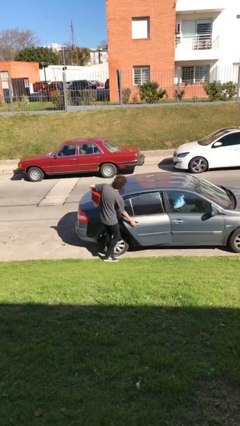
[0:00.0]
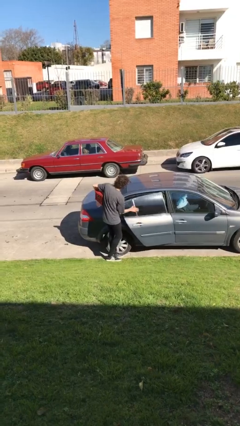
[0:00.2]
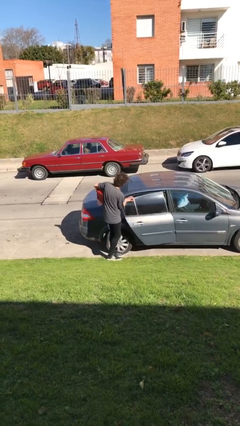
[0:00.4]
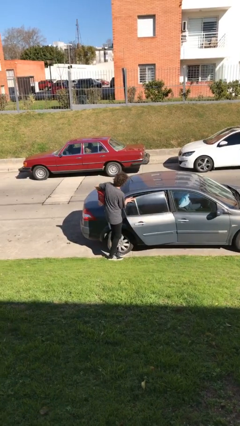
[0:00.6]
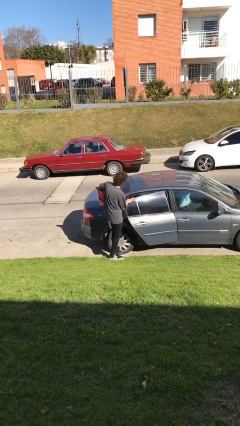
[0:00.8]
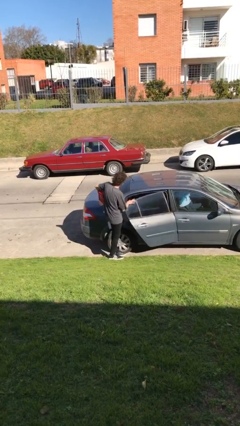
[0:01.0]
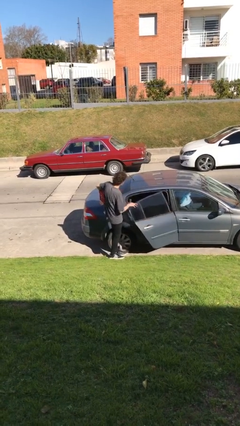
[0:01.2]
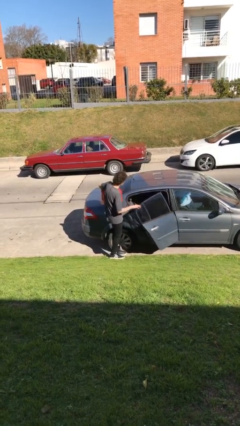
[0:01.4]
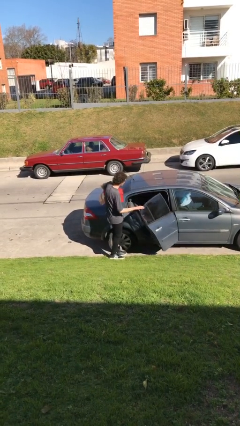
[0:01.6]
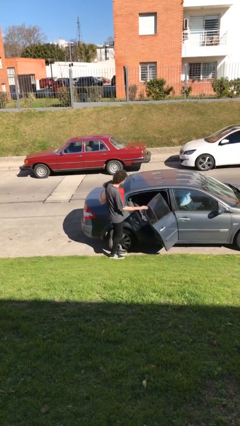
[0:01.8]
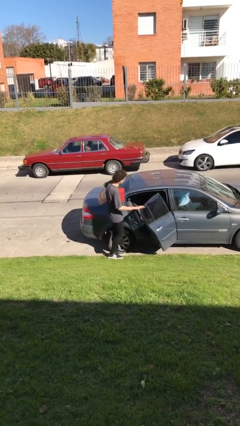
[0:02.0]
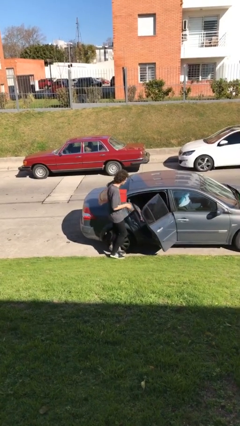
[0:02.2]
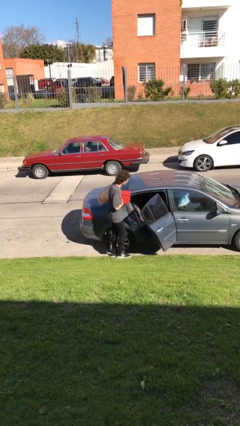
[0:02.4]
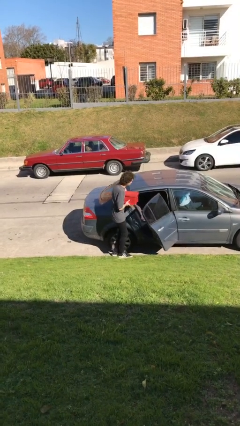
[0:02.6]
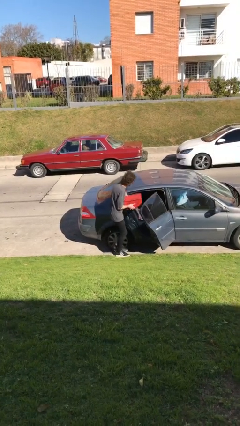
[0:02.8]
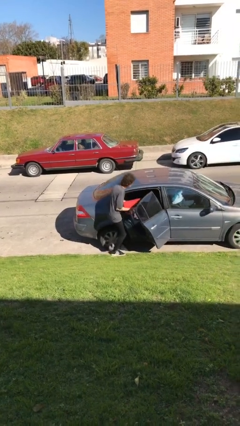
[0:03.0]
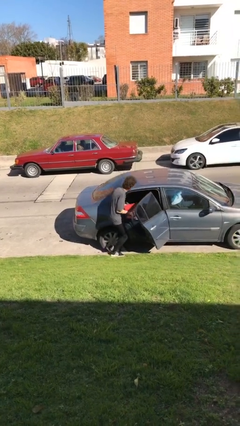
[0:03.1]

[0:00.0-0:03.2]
person opens car door

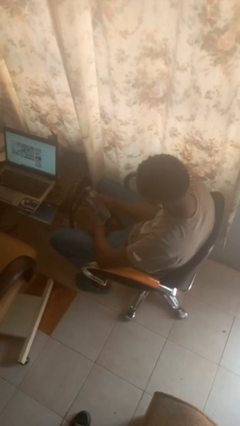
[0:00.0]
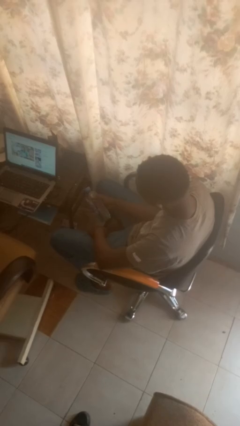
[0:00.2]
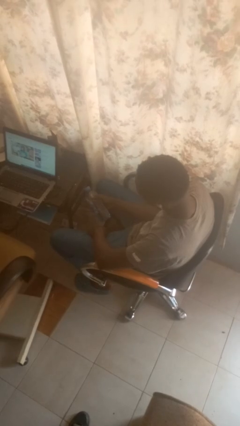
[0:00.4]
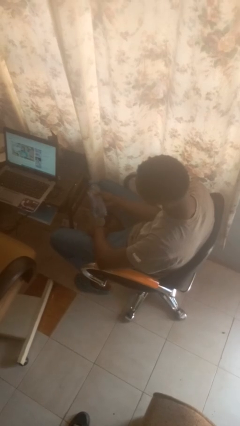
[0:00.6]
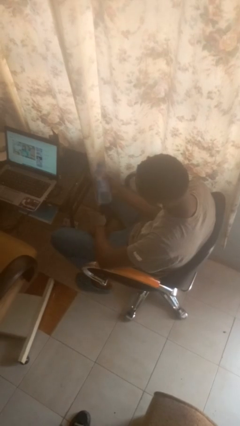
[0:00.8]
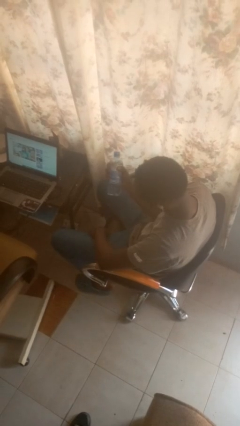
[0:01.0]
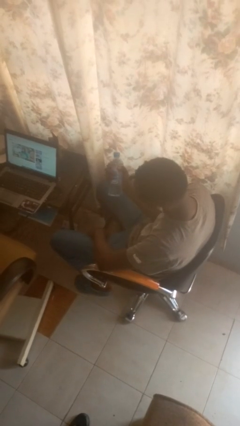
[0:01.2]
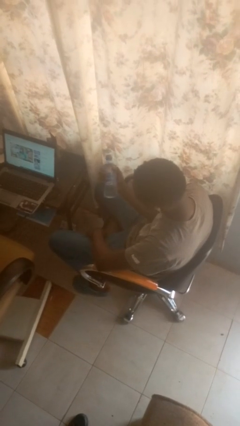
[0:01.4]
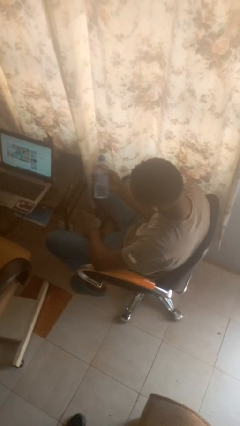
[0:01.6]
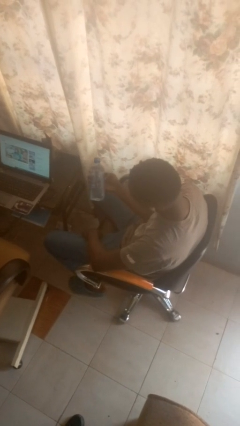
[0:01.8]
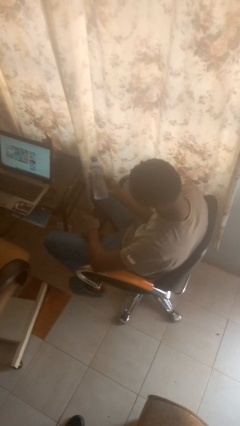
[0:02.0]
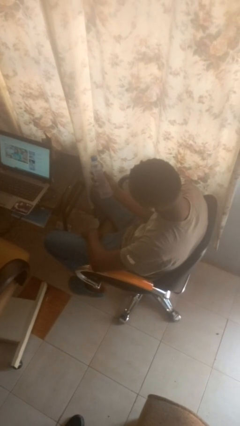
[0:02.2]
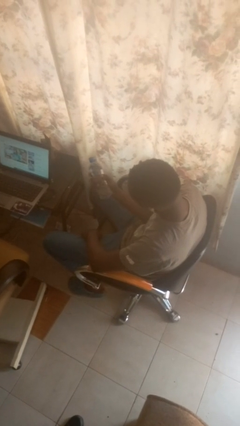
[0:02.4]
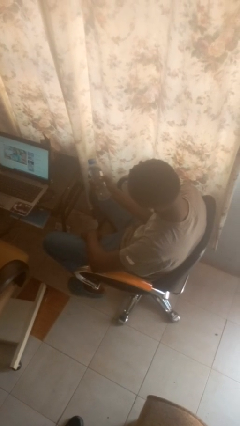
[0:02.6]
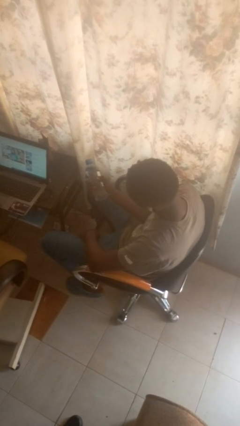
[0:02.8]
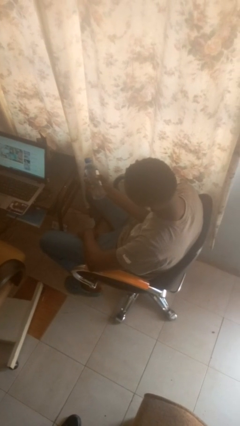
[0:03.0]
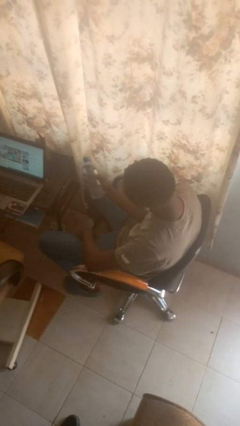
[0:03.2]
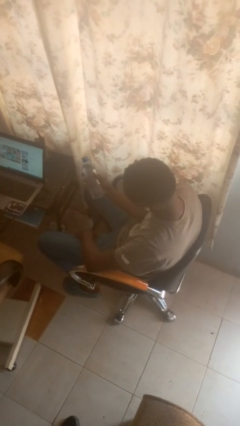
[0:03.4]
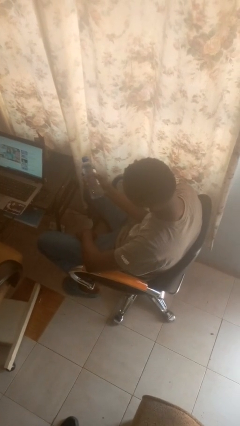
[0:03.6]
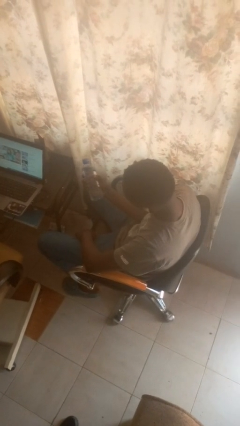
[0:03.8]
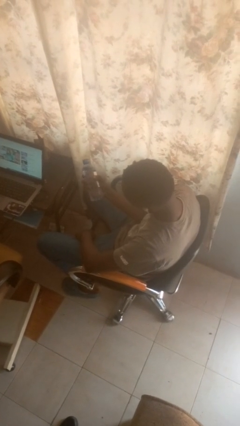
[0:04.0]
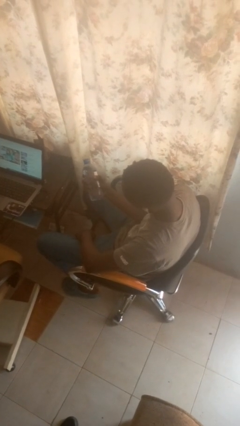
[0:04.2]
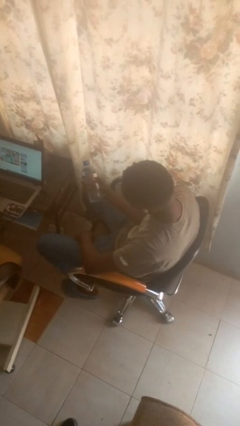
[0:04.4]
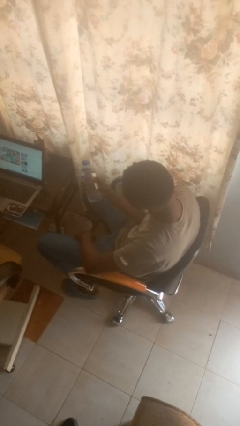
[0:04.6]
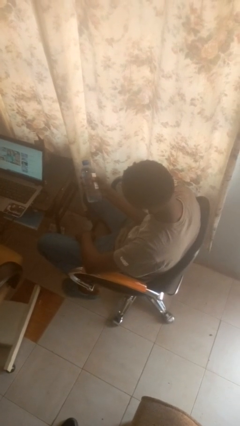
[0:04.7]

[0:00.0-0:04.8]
person squeezes object

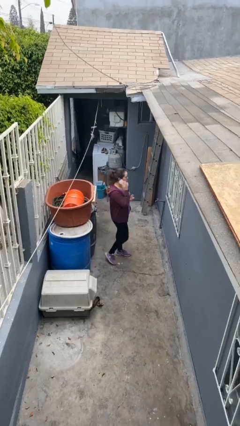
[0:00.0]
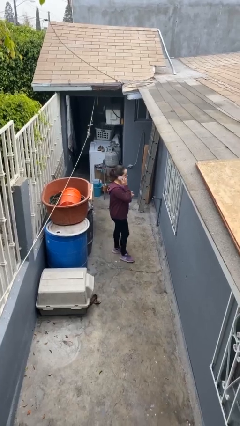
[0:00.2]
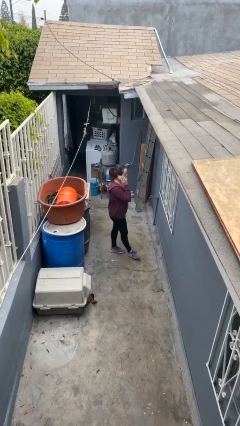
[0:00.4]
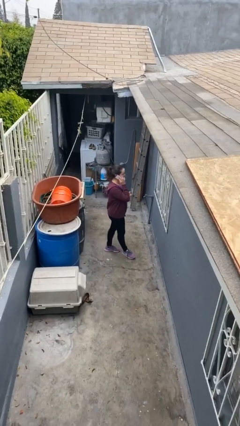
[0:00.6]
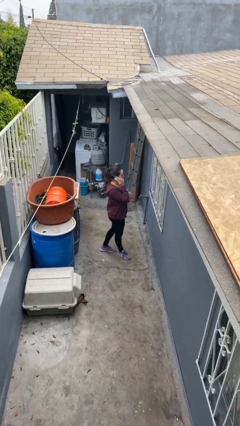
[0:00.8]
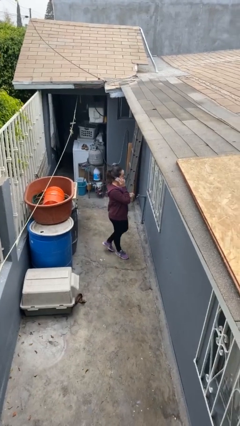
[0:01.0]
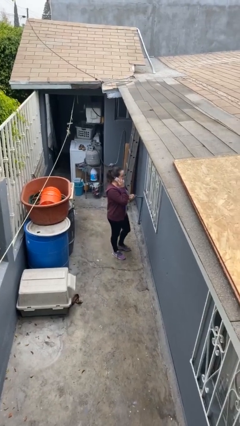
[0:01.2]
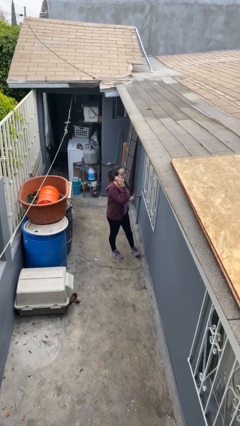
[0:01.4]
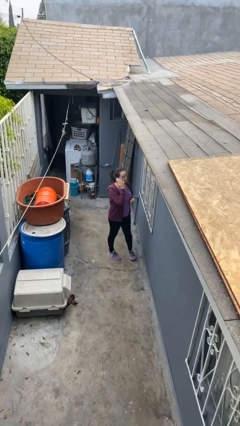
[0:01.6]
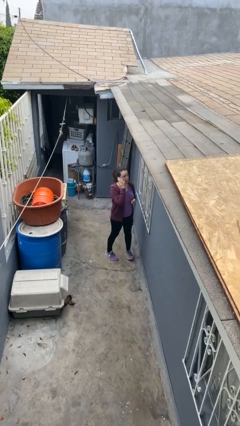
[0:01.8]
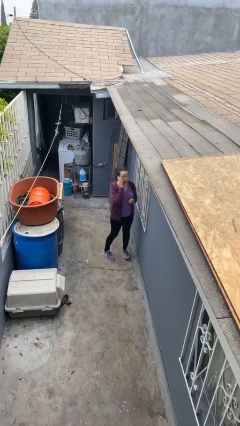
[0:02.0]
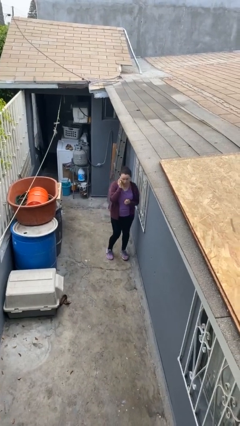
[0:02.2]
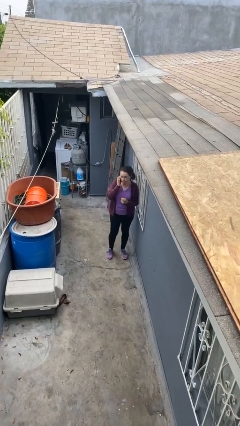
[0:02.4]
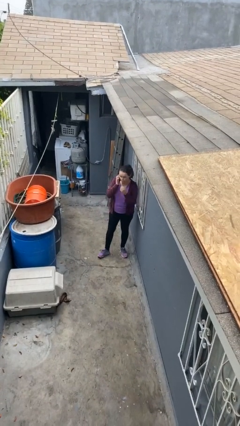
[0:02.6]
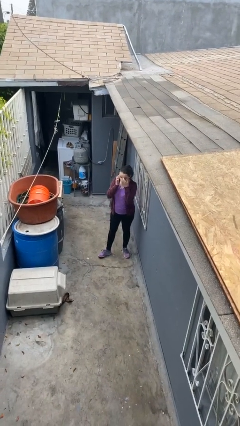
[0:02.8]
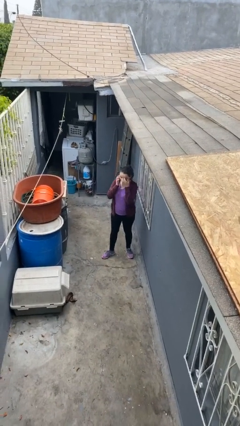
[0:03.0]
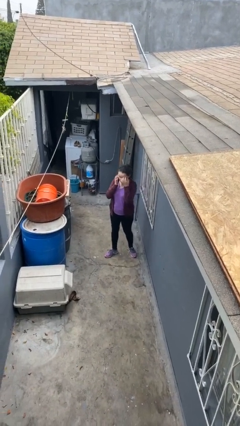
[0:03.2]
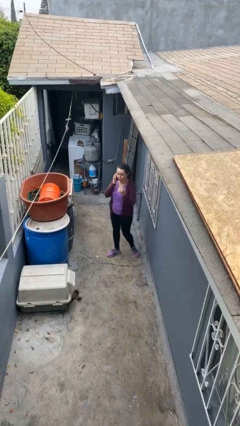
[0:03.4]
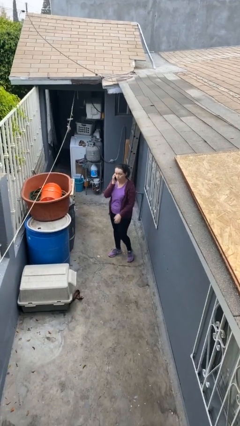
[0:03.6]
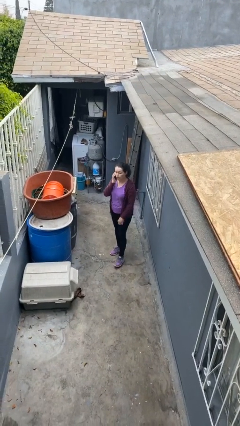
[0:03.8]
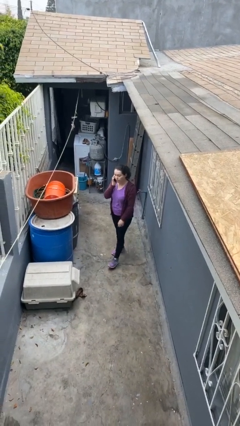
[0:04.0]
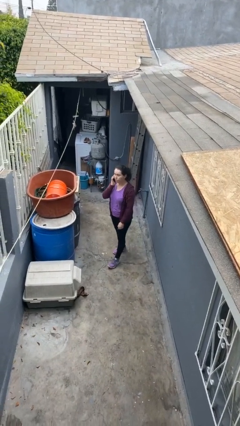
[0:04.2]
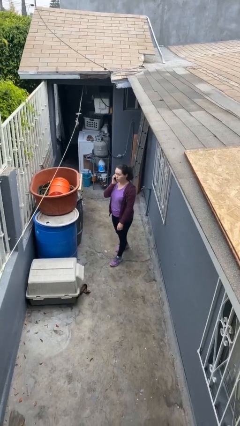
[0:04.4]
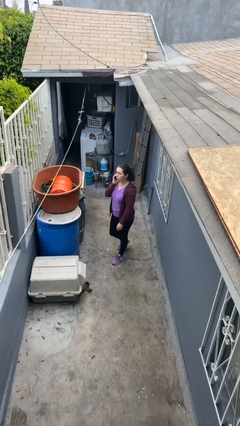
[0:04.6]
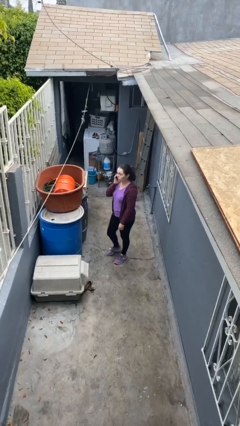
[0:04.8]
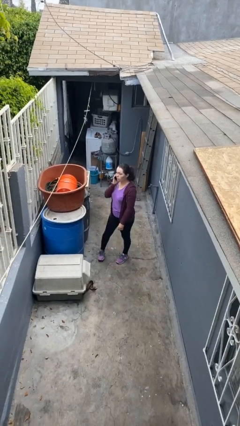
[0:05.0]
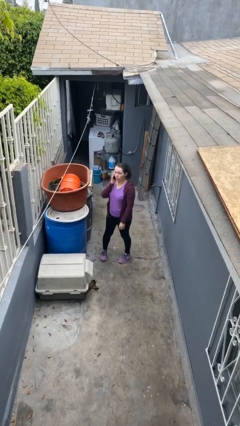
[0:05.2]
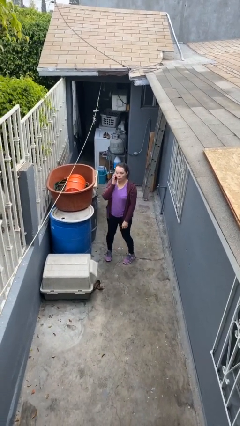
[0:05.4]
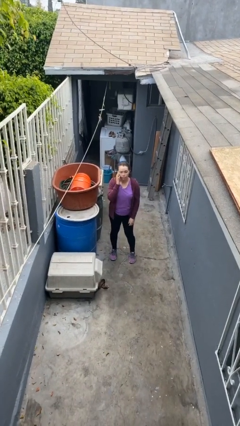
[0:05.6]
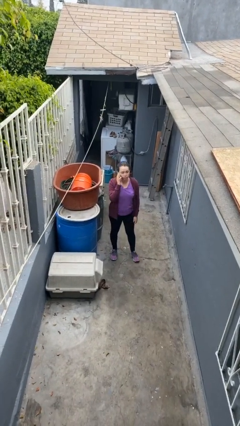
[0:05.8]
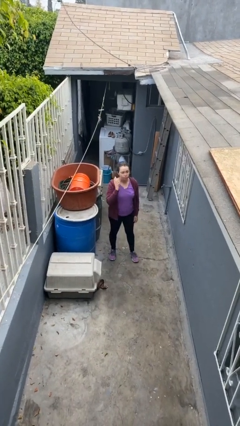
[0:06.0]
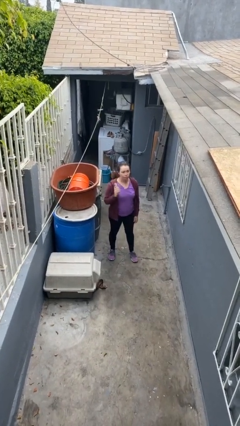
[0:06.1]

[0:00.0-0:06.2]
person talks on phone

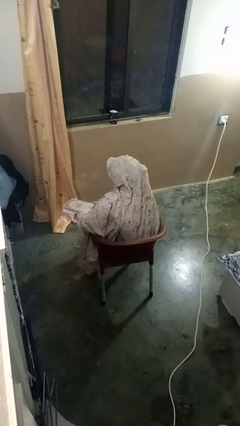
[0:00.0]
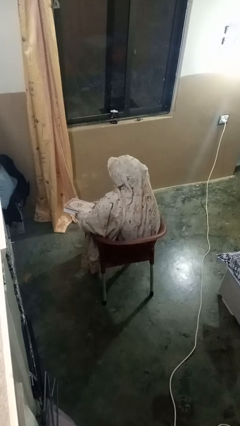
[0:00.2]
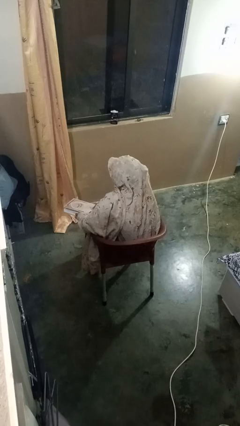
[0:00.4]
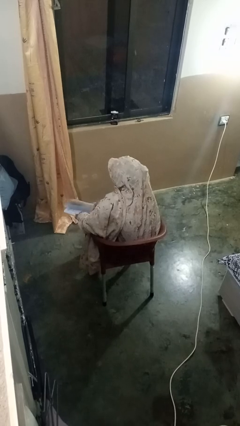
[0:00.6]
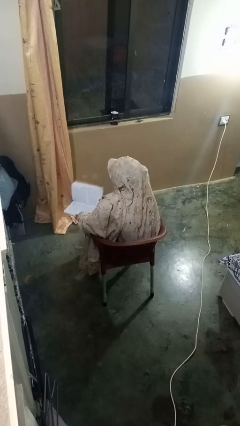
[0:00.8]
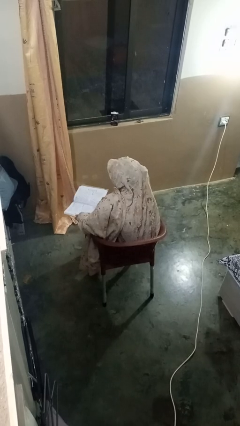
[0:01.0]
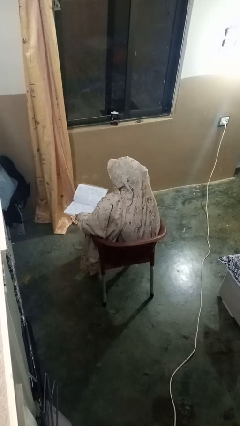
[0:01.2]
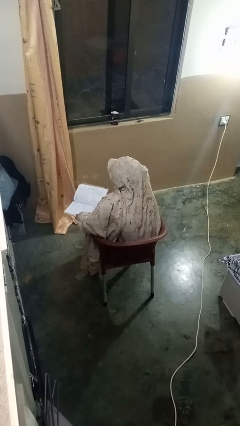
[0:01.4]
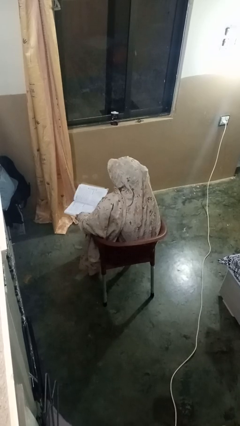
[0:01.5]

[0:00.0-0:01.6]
person reads book

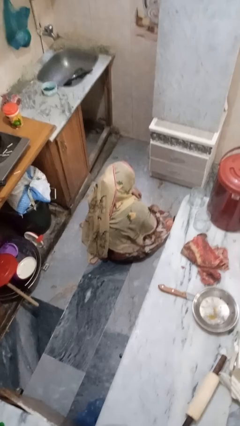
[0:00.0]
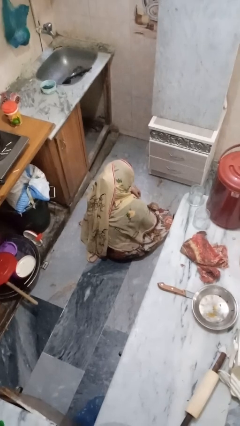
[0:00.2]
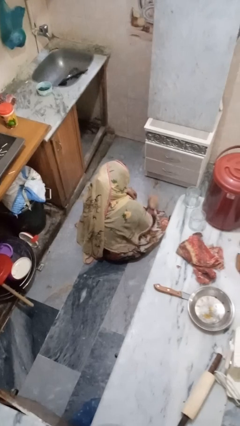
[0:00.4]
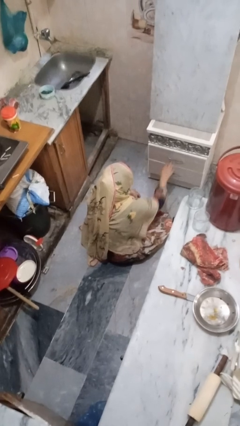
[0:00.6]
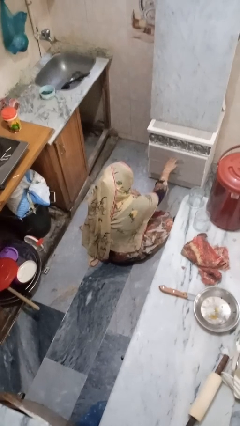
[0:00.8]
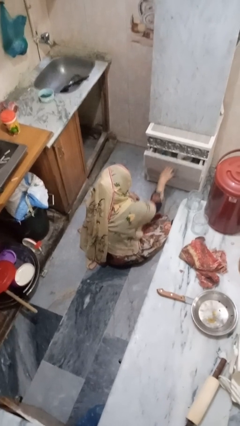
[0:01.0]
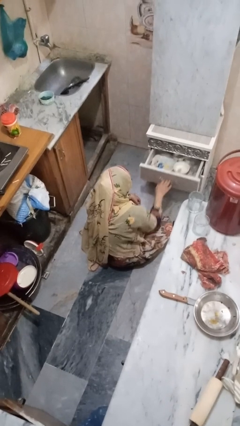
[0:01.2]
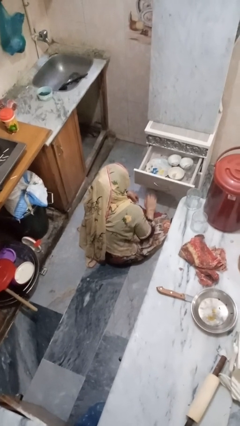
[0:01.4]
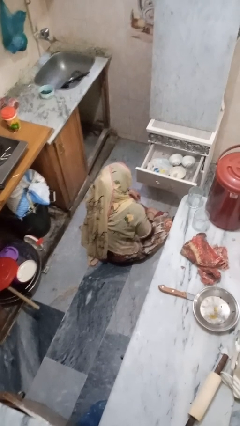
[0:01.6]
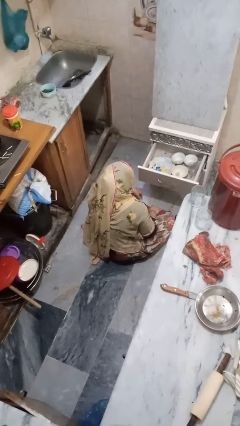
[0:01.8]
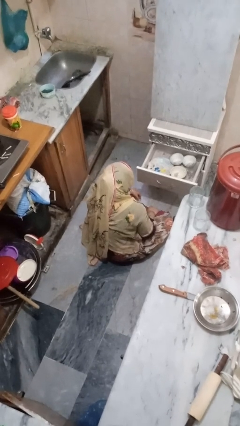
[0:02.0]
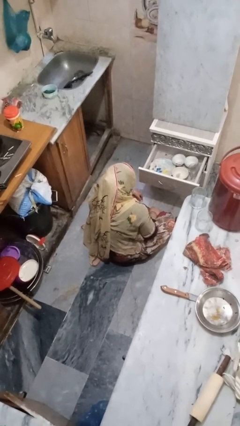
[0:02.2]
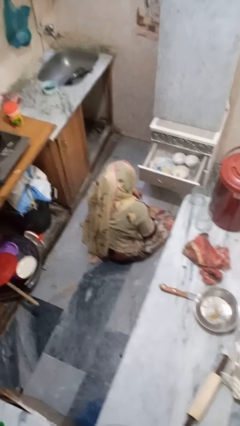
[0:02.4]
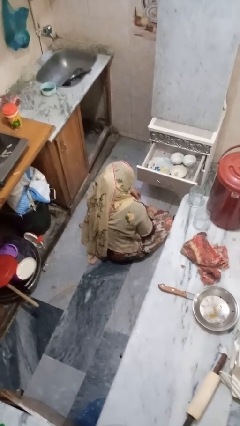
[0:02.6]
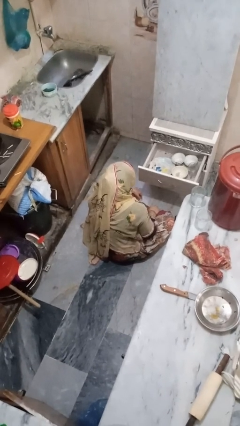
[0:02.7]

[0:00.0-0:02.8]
person opens kitchen drawer
